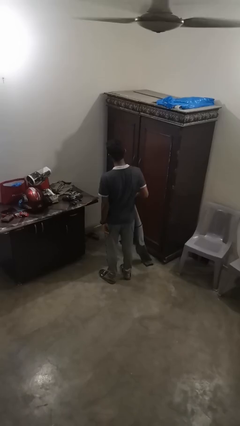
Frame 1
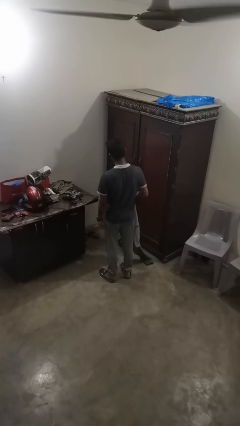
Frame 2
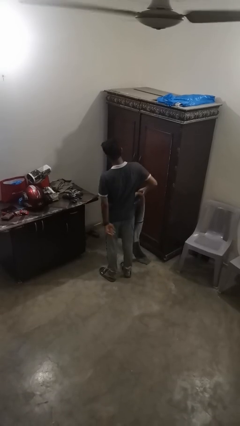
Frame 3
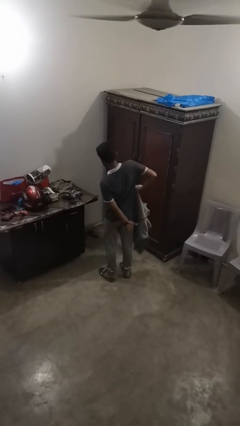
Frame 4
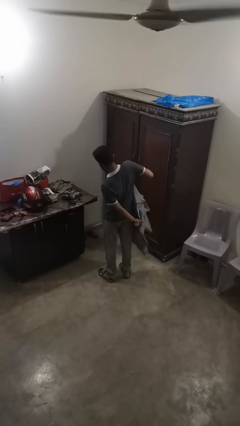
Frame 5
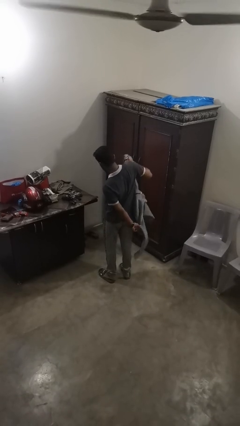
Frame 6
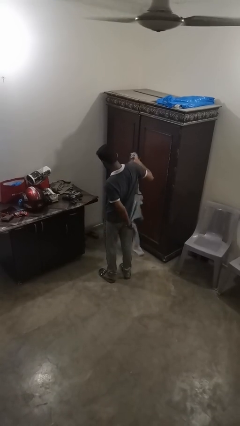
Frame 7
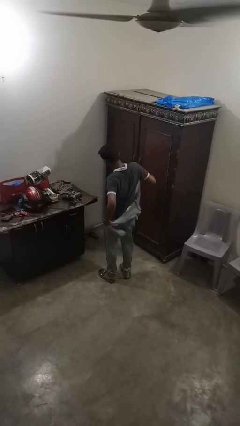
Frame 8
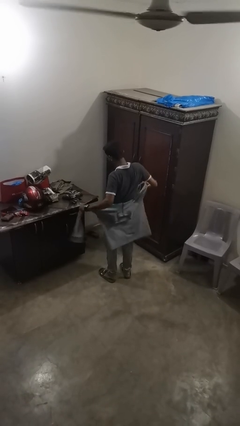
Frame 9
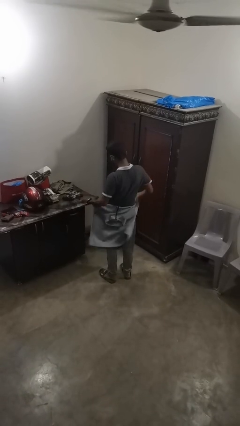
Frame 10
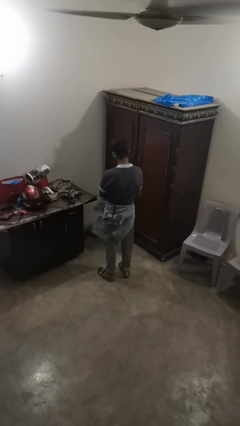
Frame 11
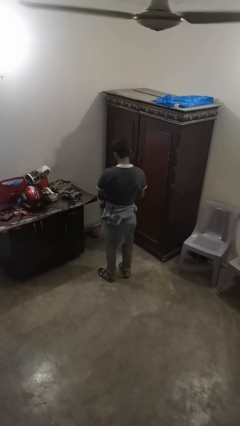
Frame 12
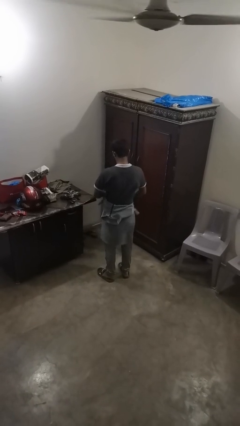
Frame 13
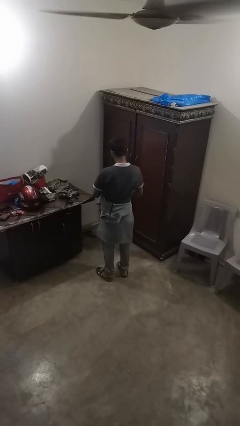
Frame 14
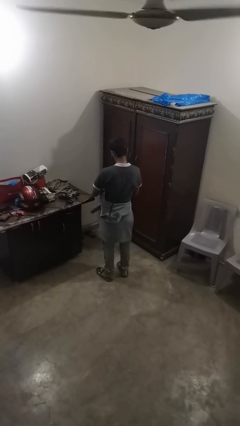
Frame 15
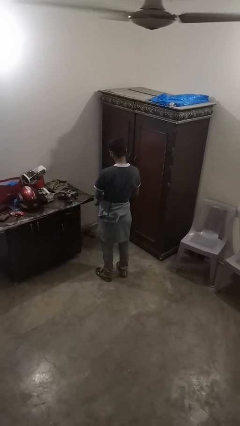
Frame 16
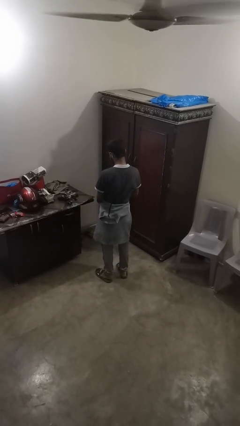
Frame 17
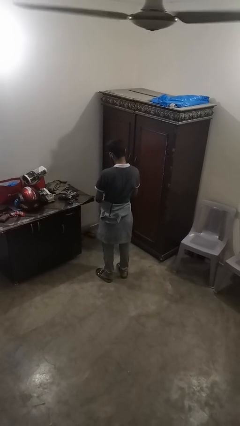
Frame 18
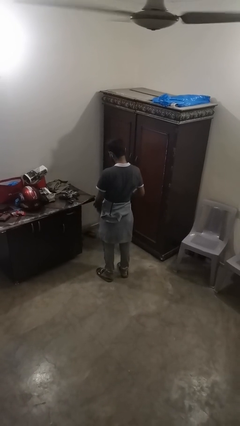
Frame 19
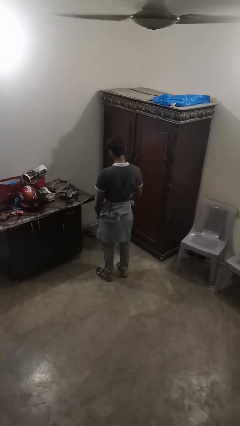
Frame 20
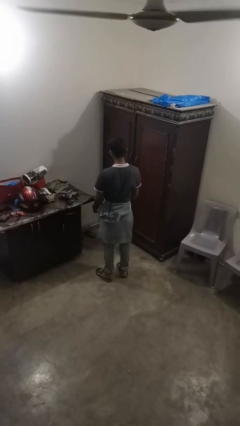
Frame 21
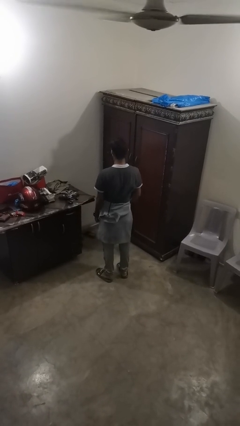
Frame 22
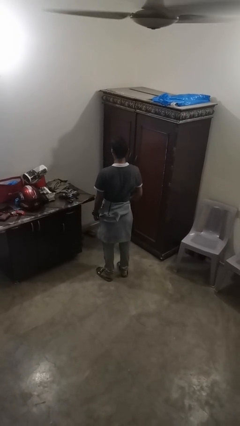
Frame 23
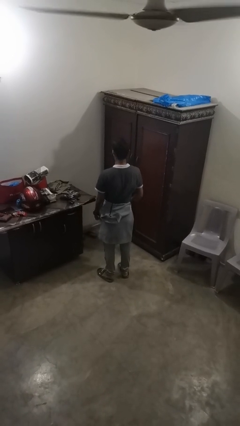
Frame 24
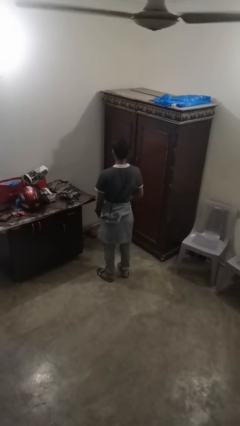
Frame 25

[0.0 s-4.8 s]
person ties jacket around waist

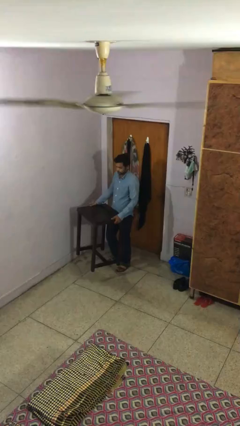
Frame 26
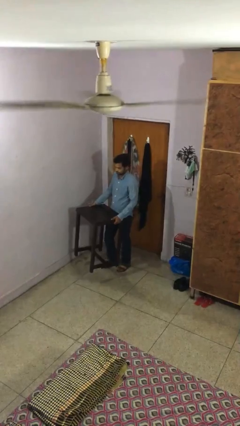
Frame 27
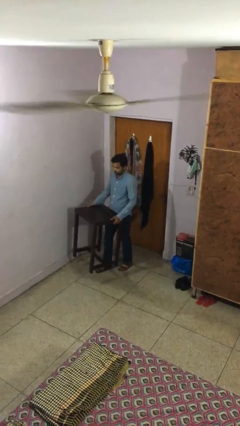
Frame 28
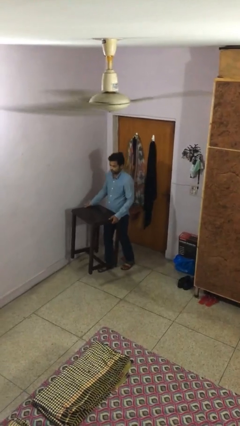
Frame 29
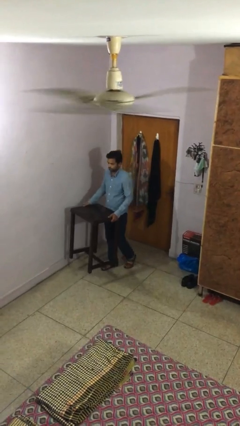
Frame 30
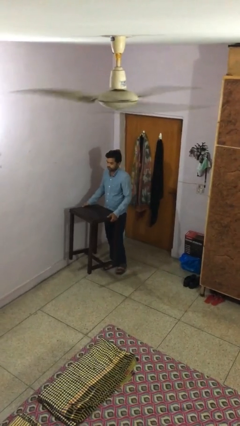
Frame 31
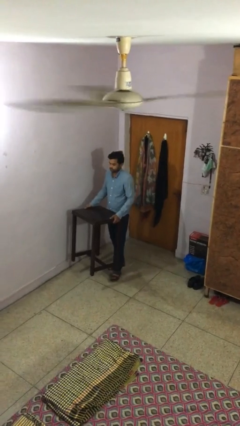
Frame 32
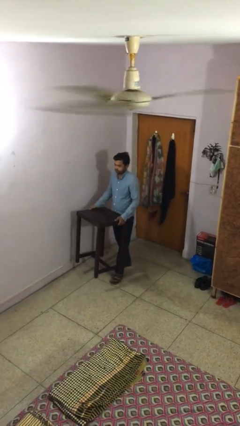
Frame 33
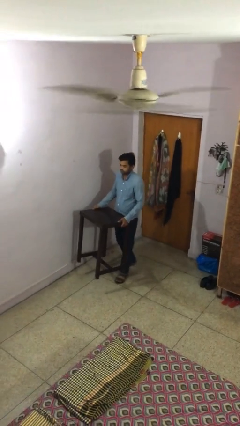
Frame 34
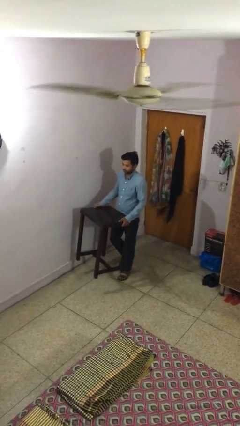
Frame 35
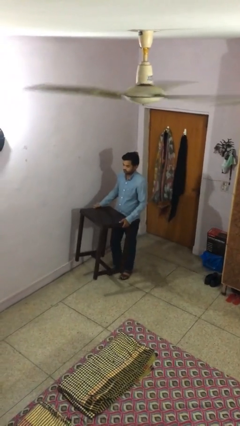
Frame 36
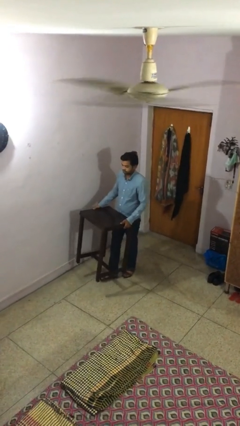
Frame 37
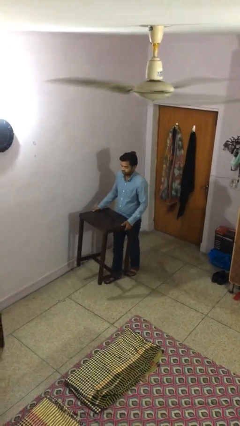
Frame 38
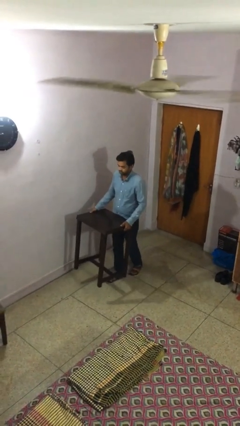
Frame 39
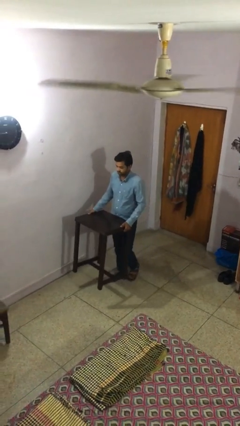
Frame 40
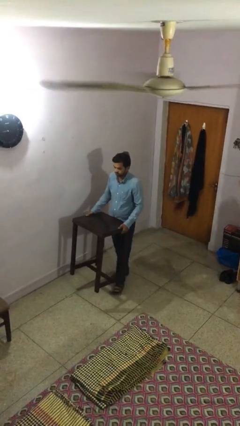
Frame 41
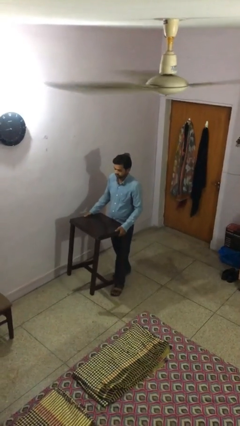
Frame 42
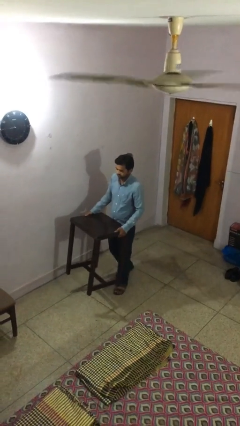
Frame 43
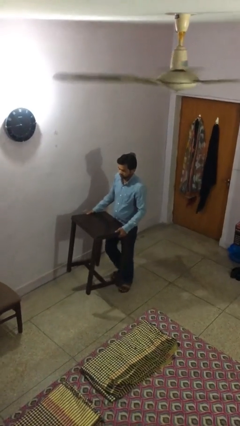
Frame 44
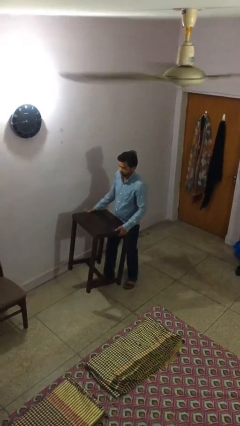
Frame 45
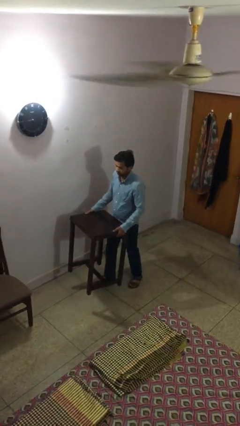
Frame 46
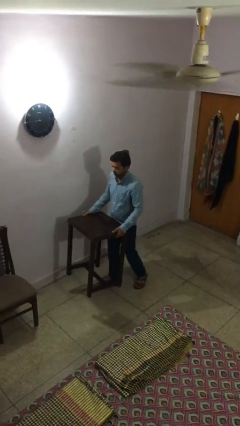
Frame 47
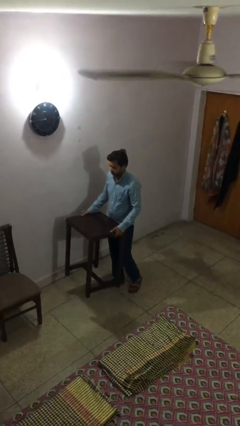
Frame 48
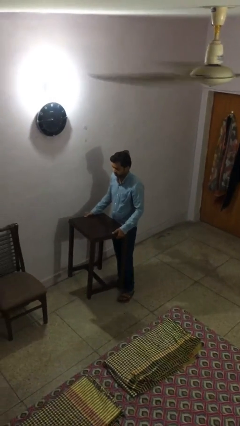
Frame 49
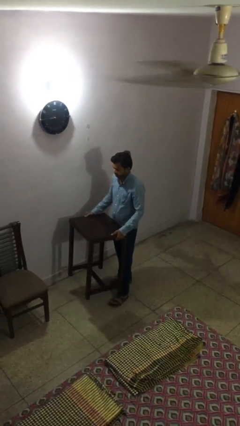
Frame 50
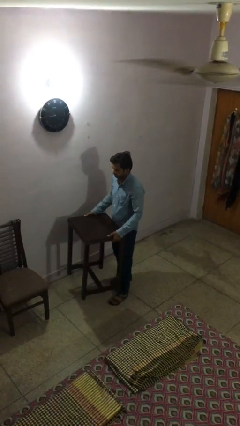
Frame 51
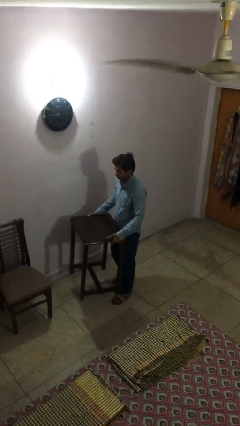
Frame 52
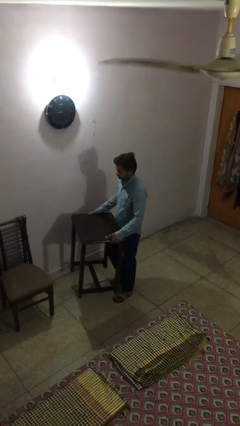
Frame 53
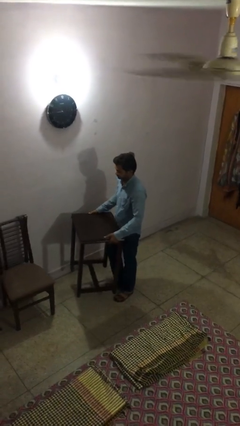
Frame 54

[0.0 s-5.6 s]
person carries heavy object

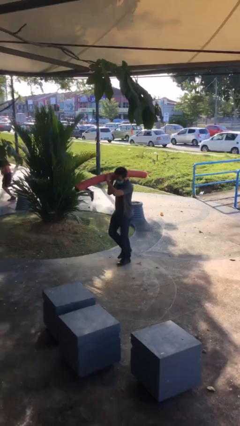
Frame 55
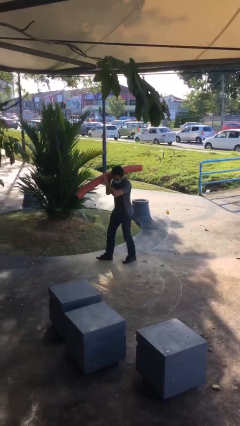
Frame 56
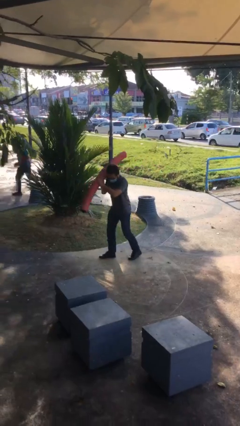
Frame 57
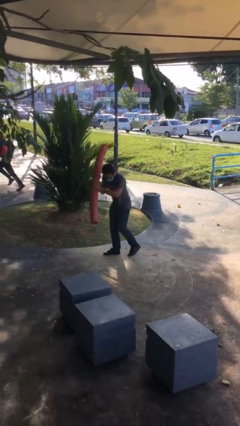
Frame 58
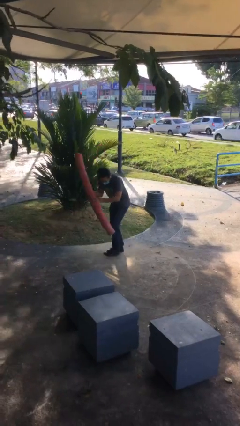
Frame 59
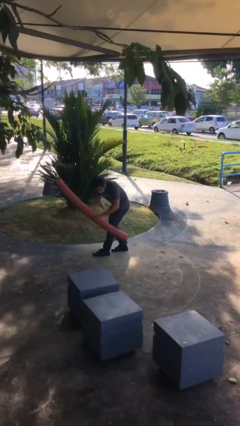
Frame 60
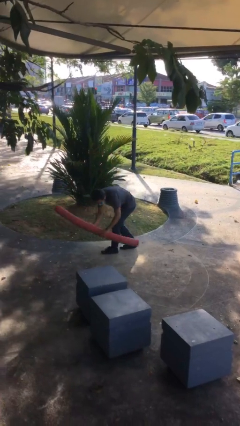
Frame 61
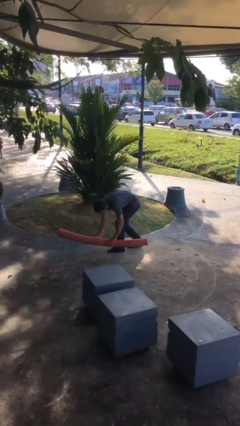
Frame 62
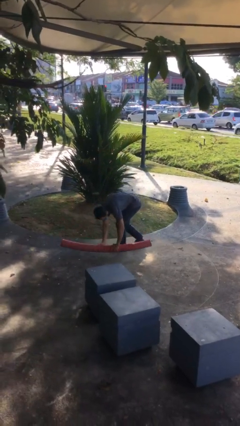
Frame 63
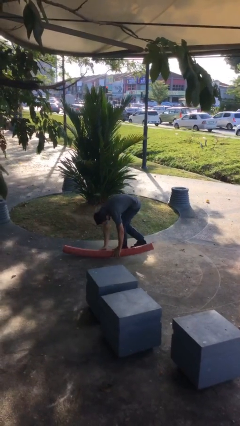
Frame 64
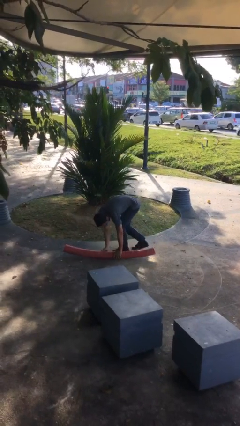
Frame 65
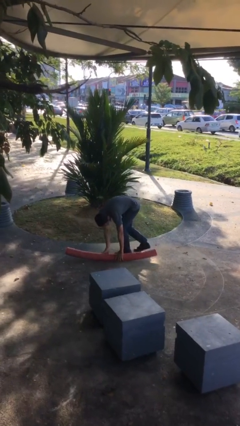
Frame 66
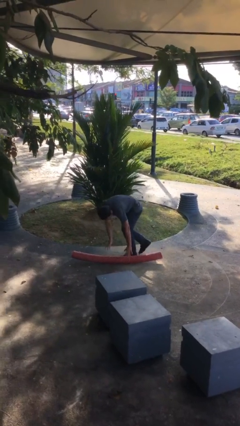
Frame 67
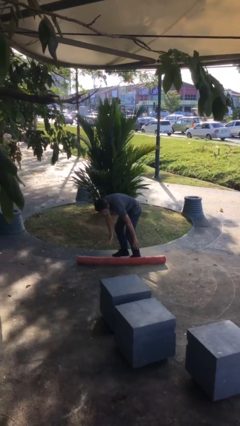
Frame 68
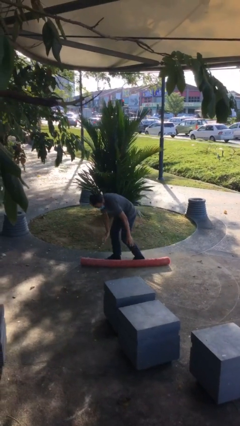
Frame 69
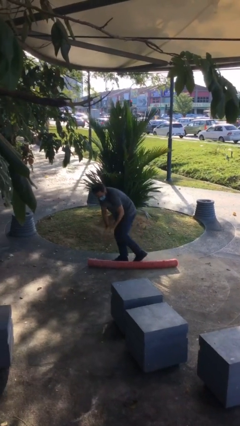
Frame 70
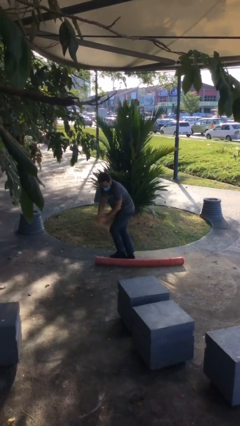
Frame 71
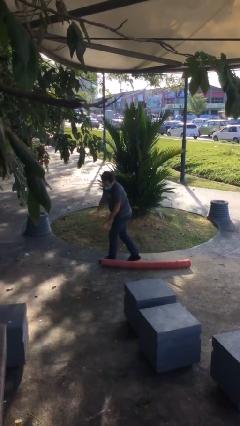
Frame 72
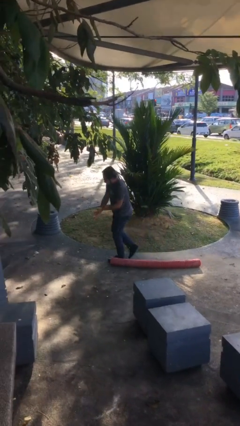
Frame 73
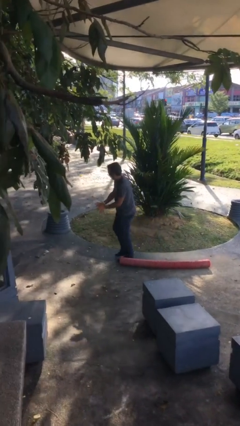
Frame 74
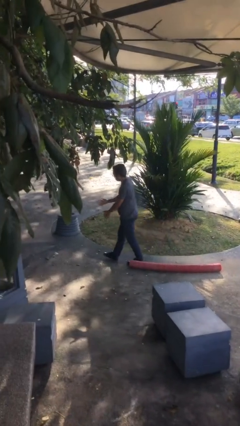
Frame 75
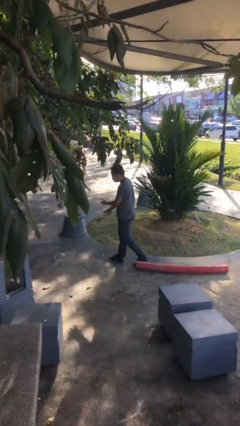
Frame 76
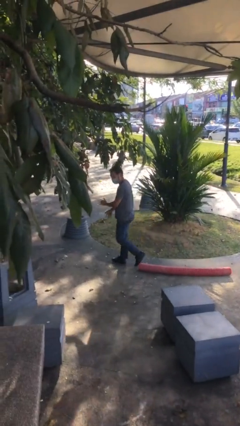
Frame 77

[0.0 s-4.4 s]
person puts down object on floor

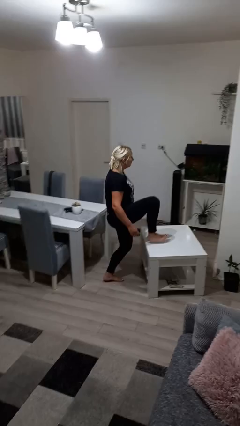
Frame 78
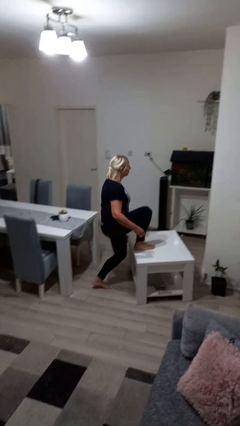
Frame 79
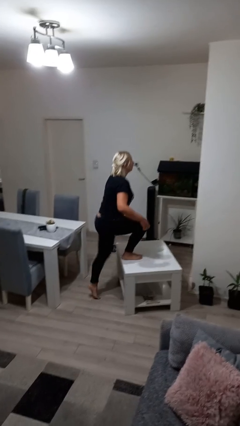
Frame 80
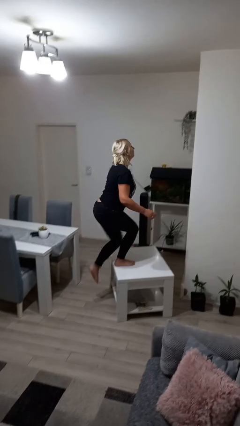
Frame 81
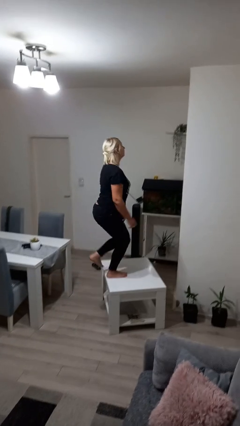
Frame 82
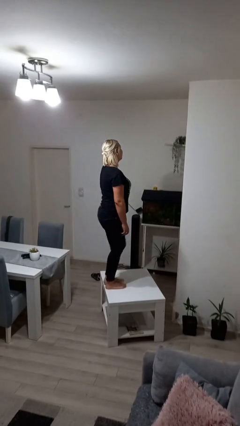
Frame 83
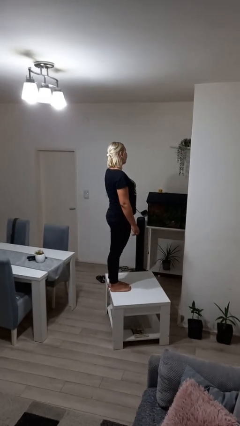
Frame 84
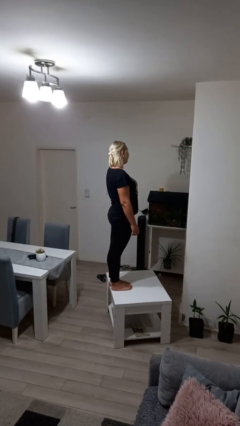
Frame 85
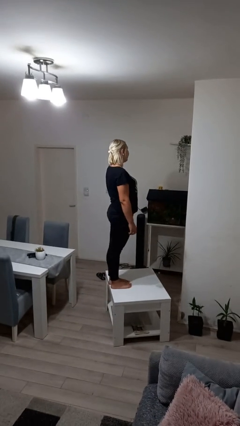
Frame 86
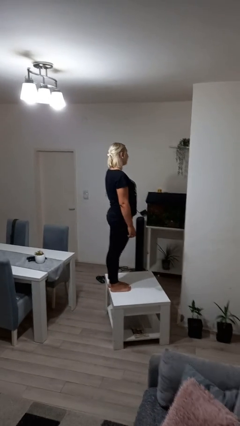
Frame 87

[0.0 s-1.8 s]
person climbs on table

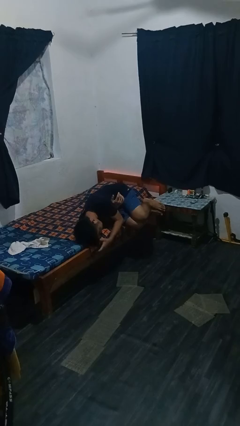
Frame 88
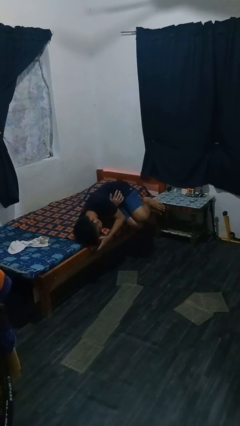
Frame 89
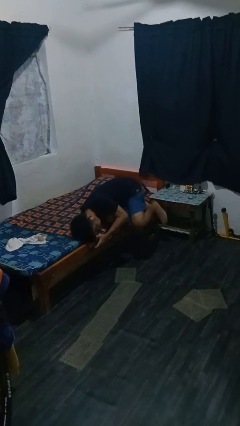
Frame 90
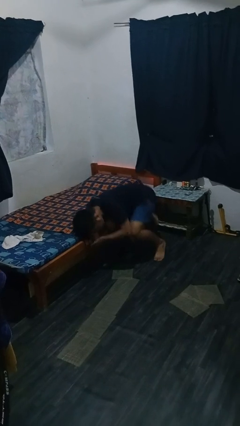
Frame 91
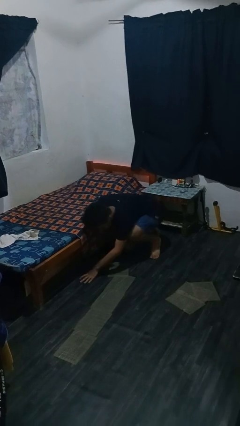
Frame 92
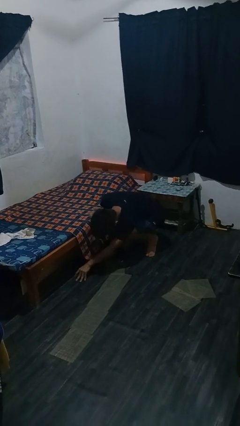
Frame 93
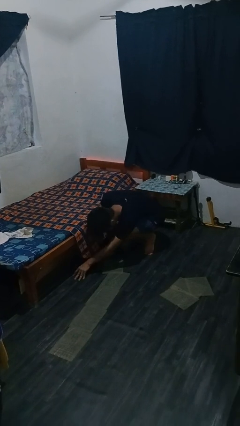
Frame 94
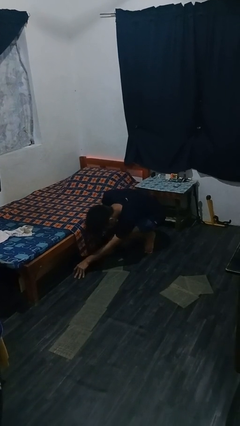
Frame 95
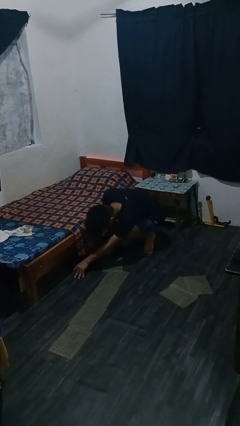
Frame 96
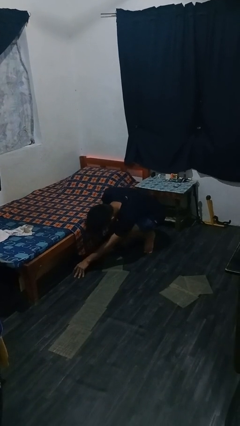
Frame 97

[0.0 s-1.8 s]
person falls from bed
